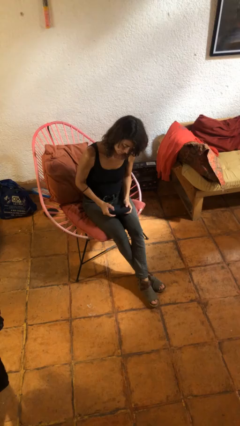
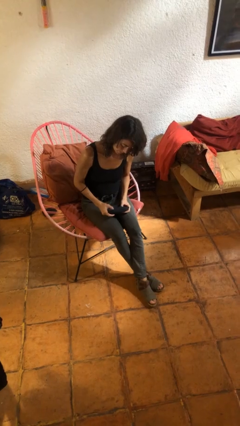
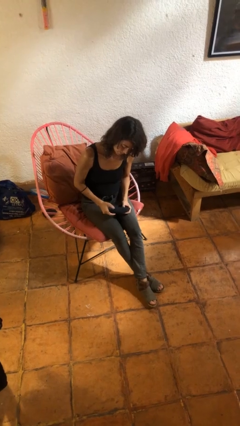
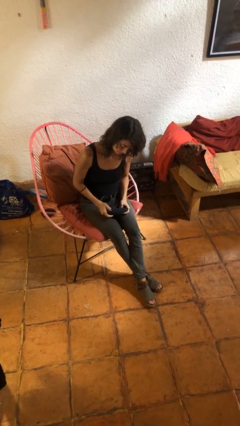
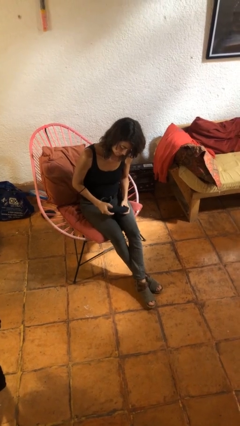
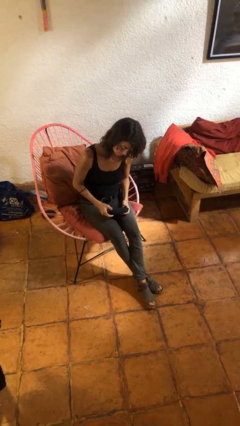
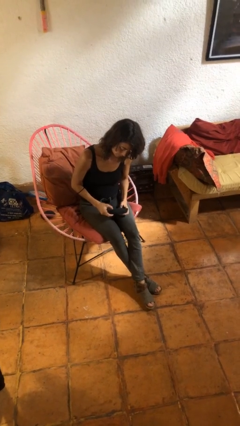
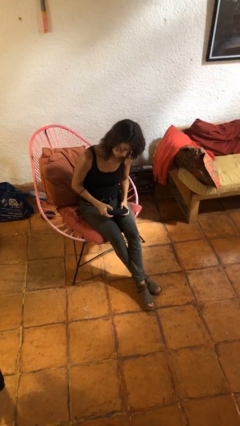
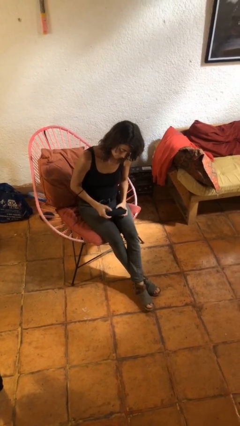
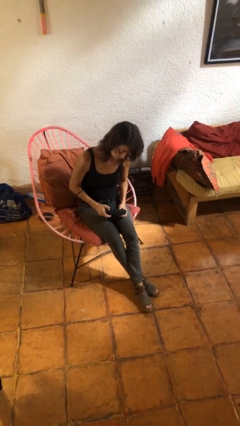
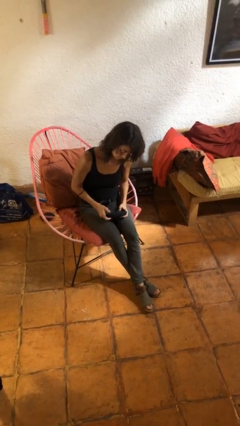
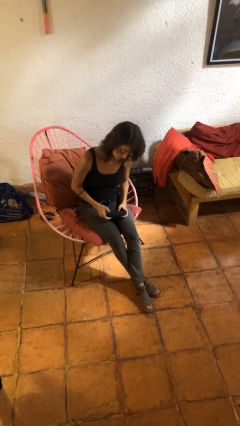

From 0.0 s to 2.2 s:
person interacts with handheld game

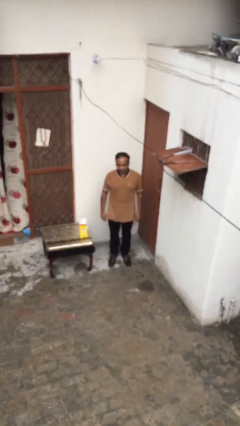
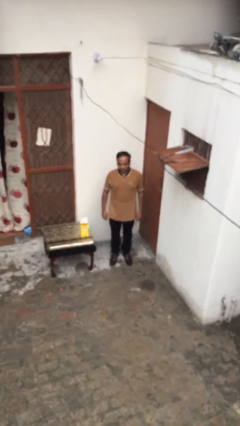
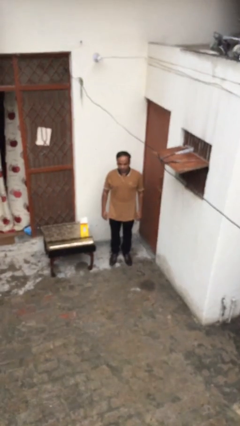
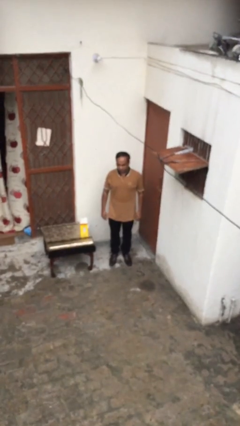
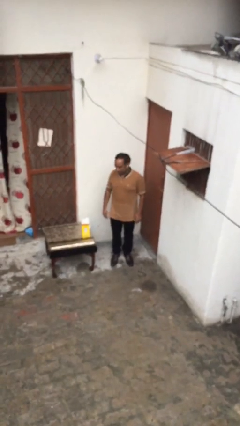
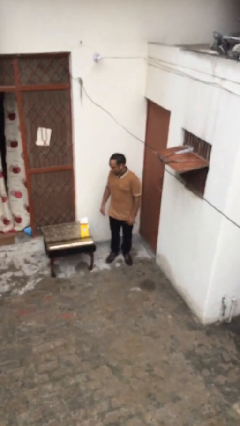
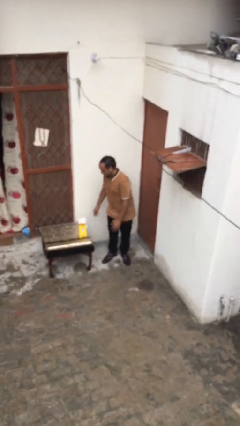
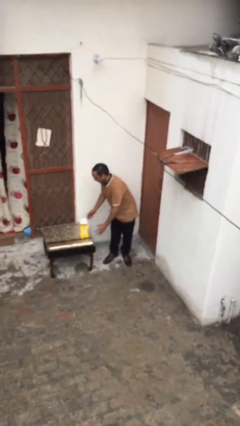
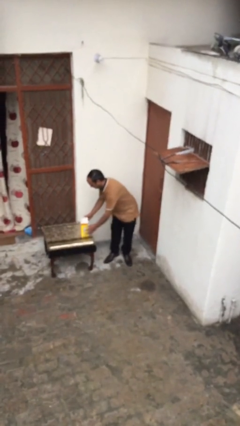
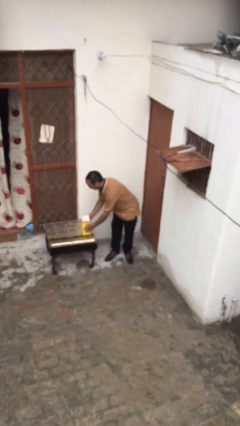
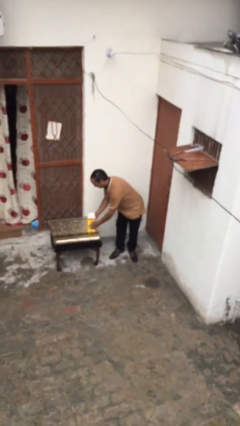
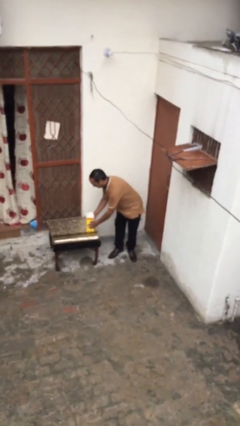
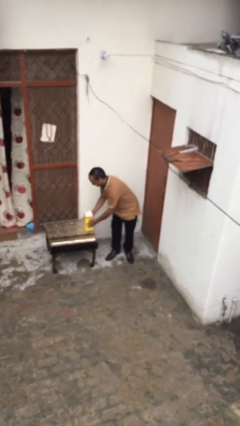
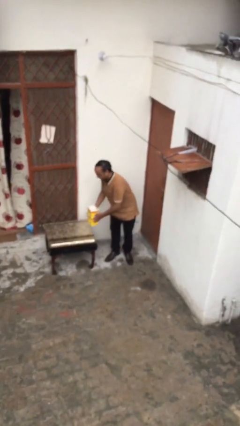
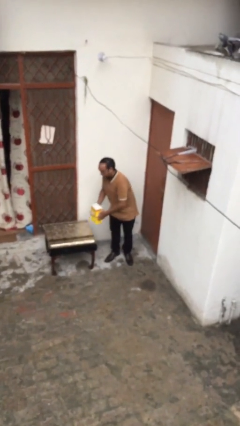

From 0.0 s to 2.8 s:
person picks up object from table

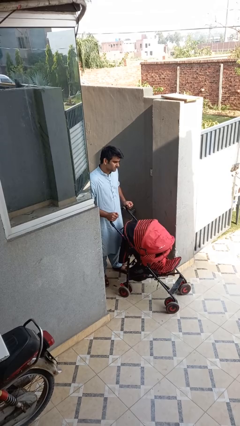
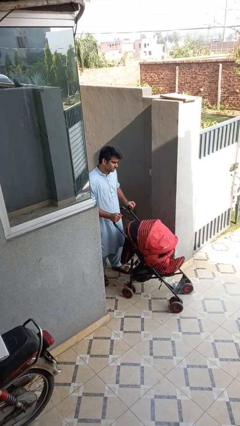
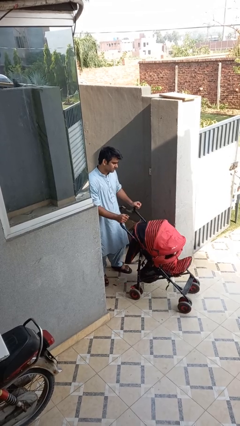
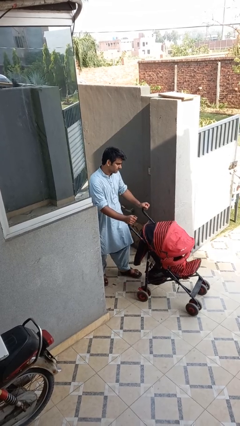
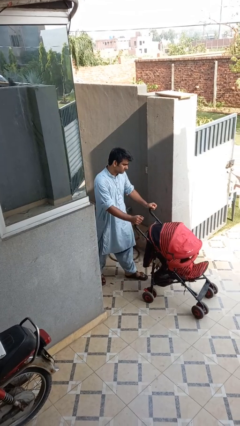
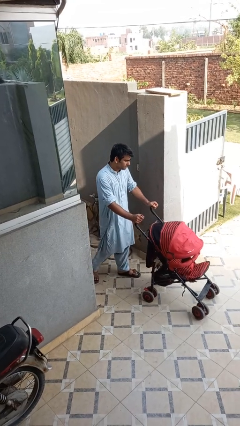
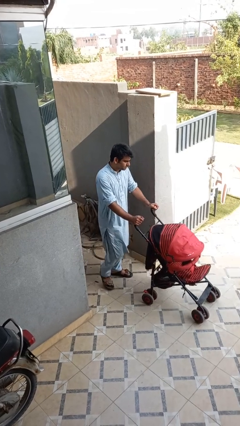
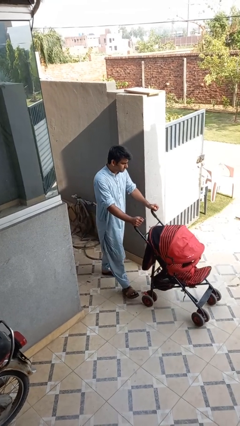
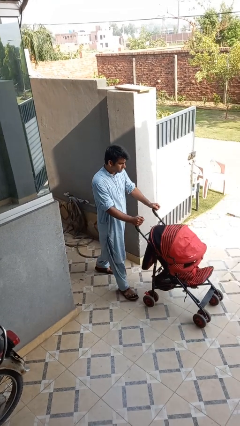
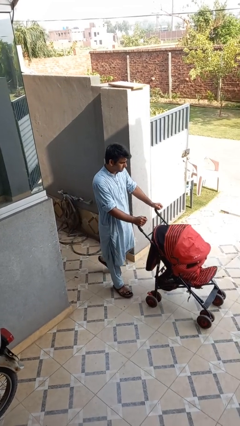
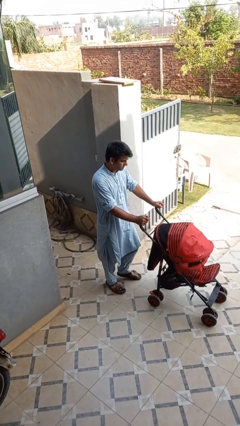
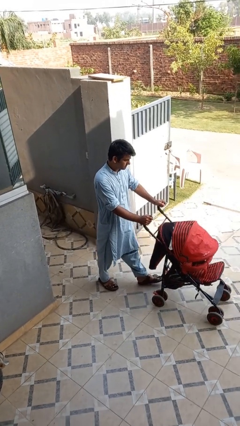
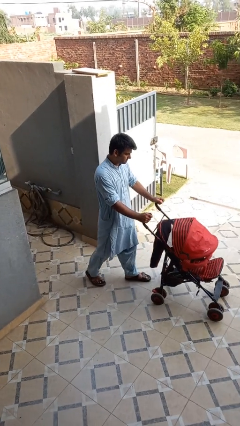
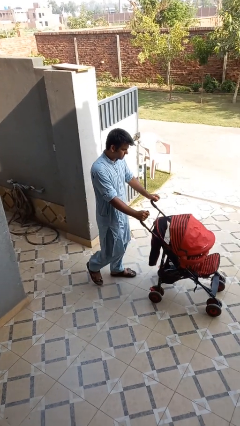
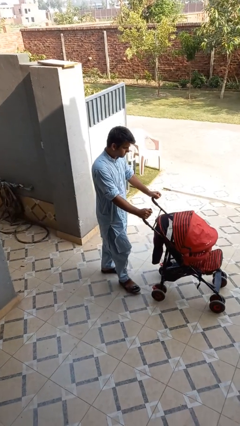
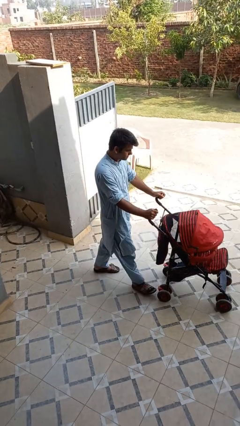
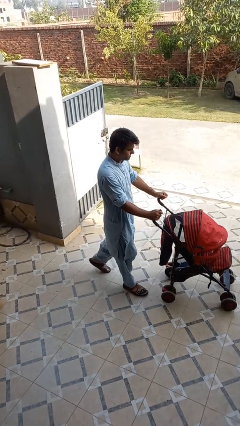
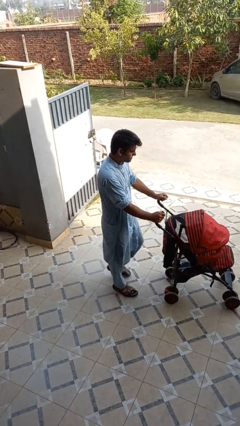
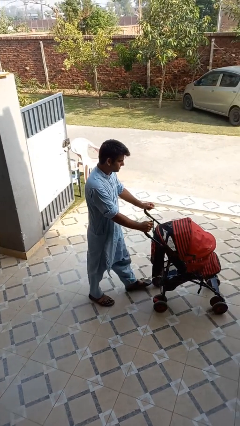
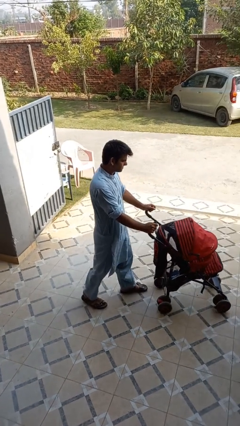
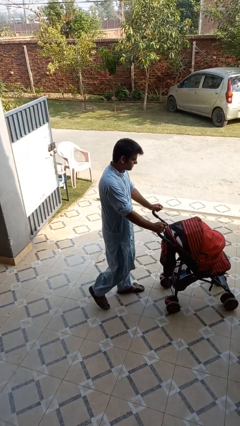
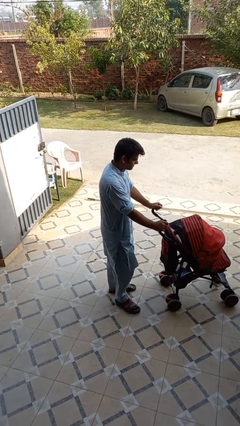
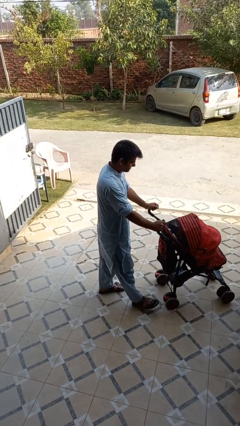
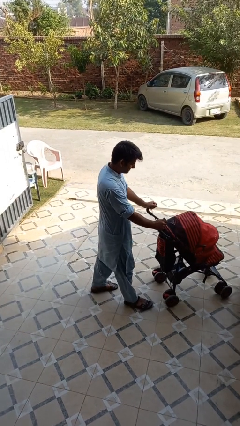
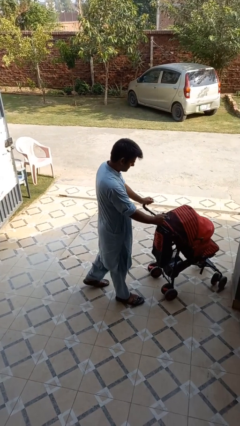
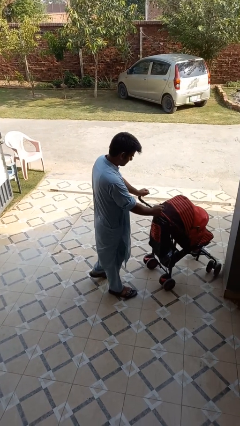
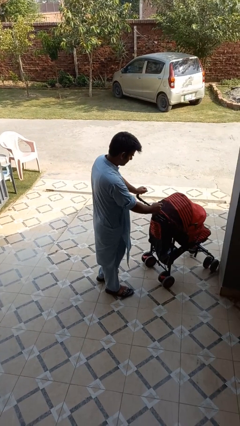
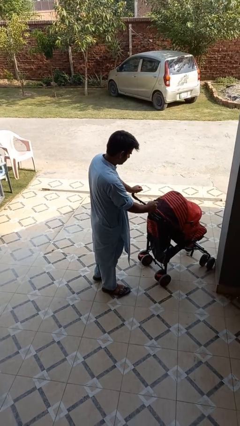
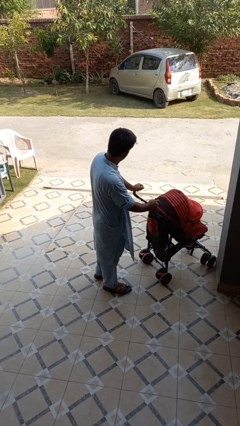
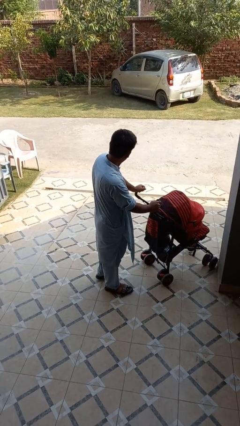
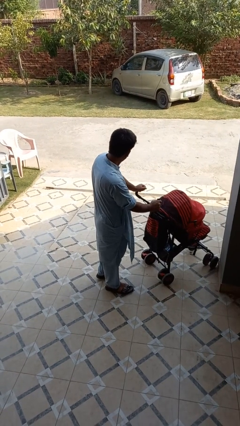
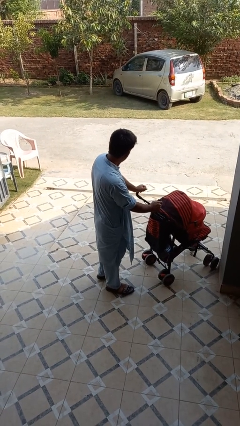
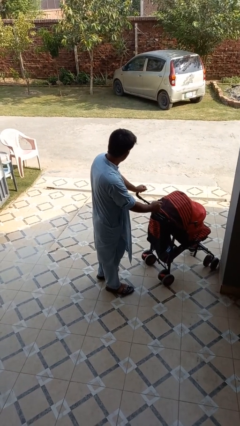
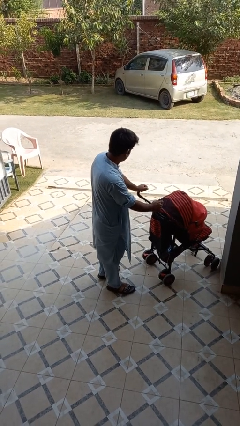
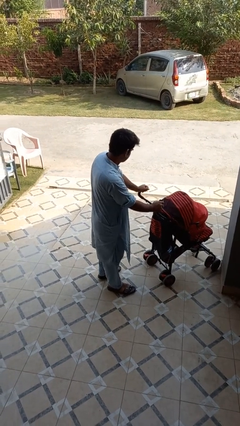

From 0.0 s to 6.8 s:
person pushes wheeled cart

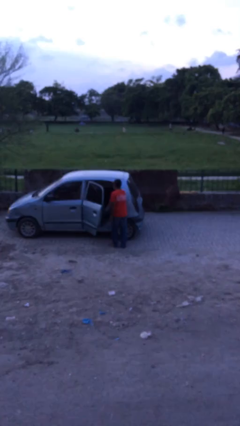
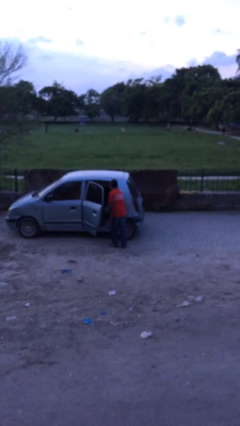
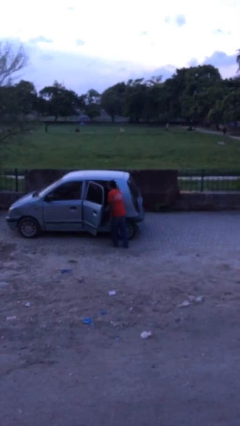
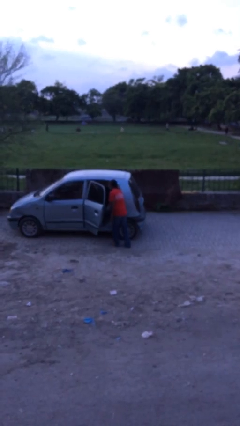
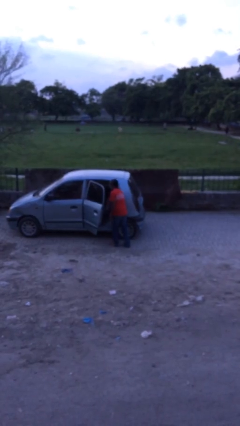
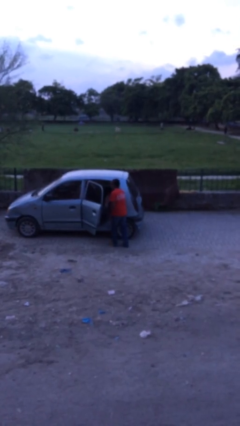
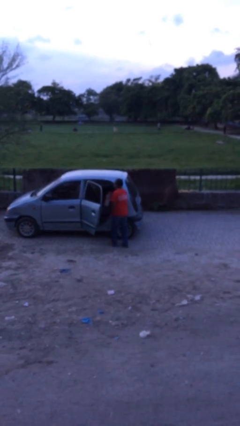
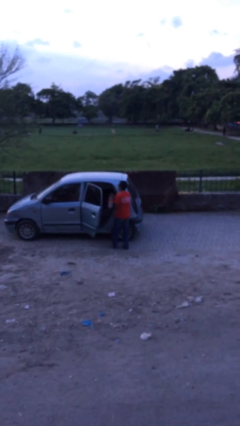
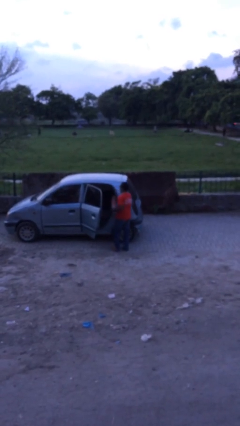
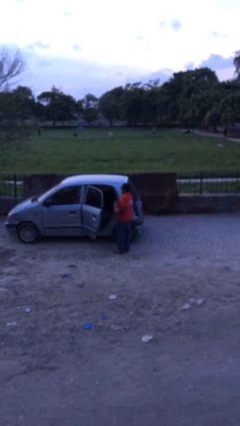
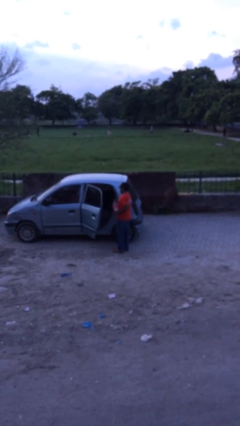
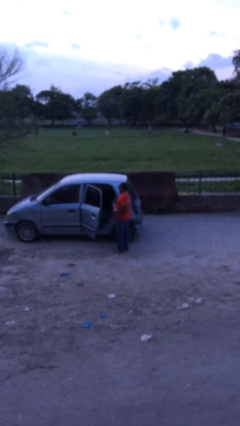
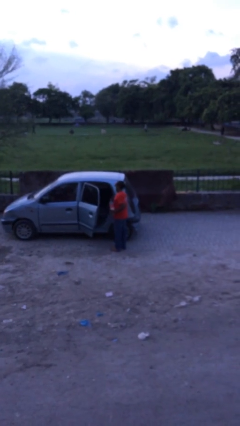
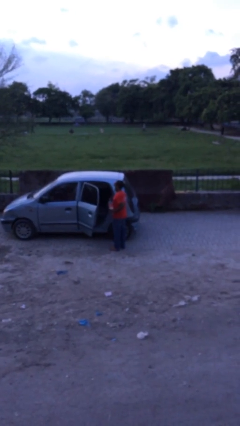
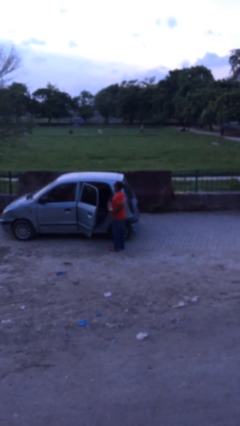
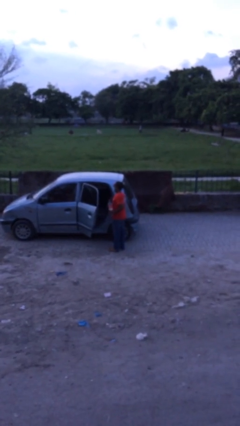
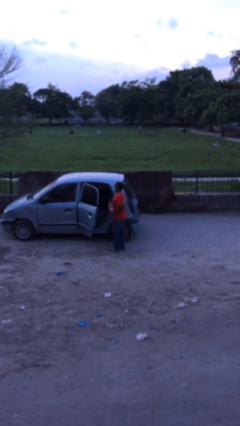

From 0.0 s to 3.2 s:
person unloads car

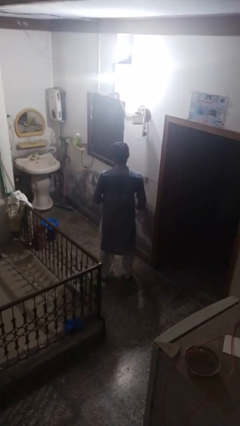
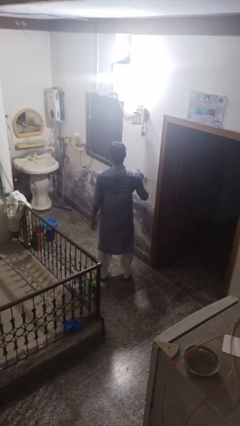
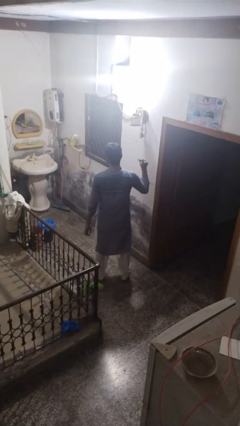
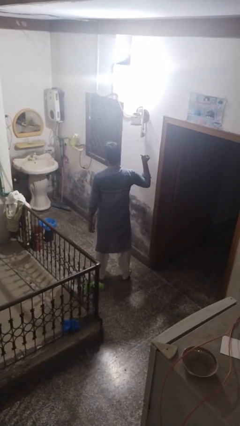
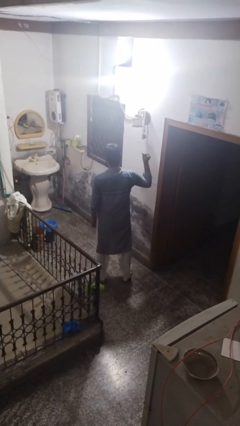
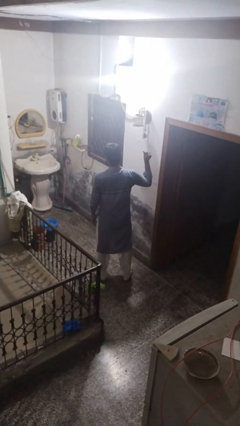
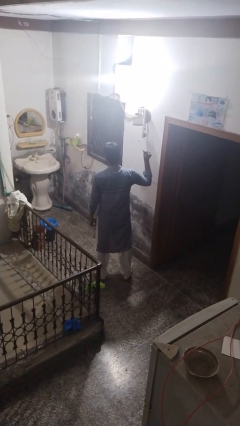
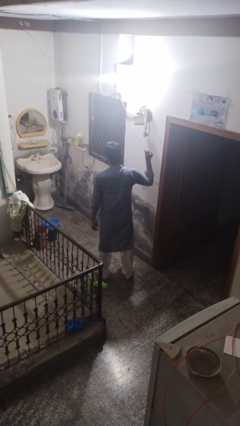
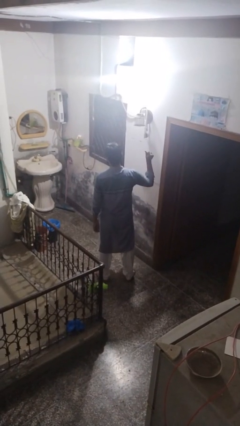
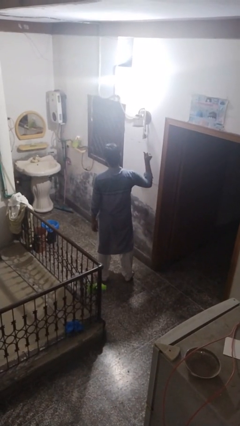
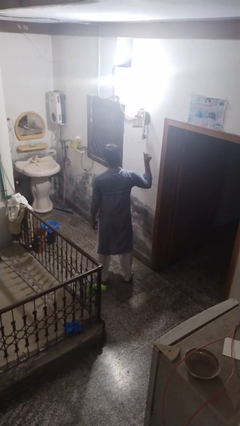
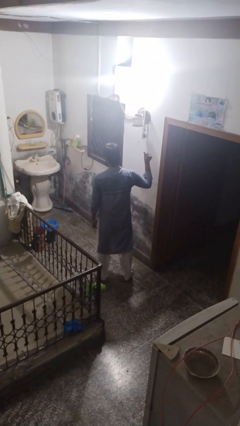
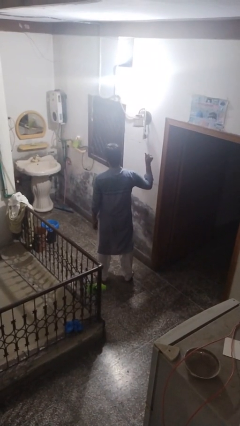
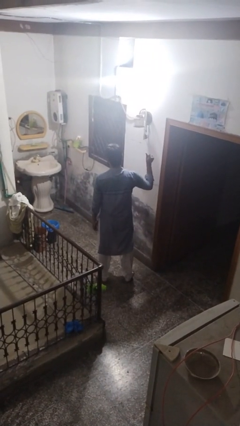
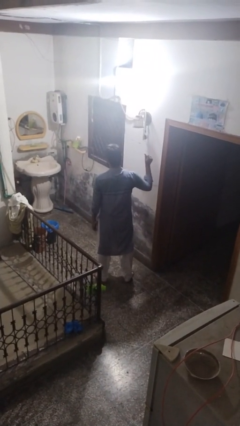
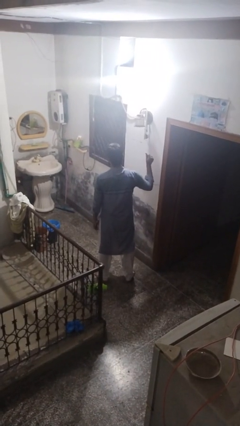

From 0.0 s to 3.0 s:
person snaps fingers
